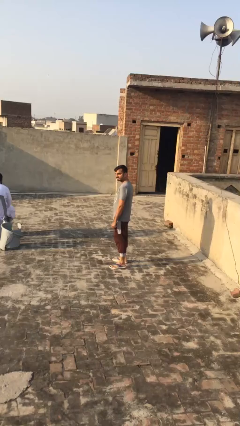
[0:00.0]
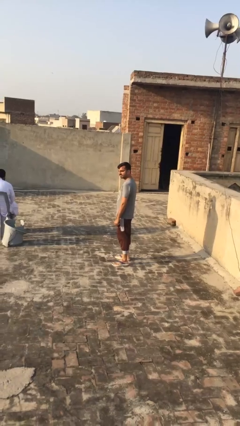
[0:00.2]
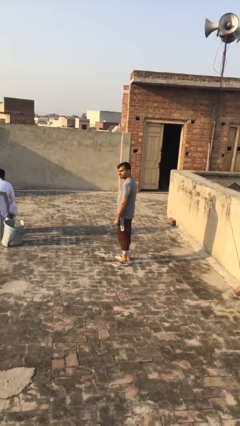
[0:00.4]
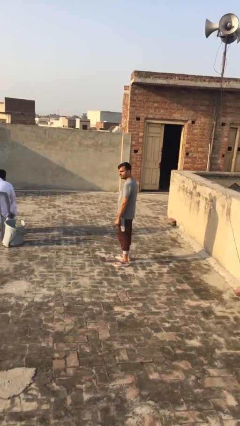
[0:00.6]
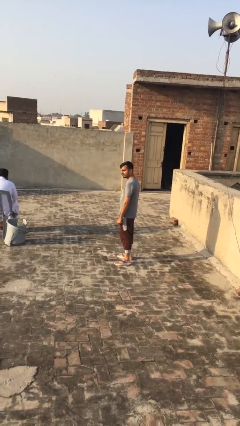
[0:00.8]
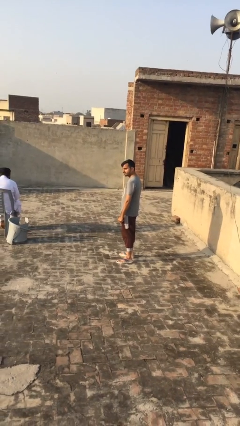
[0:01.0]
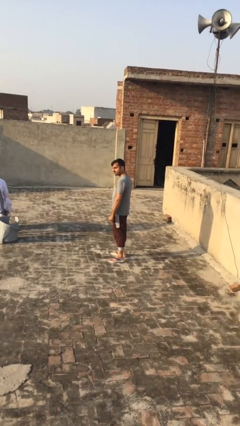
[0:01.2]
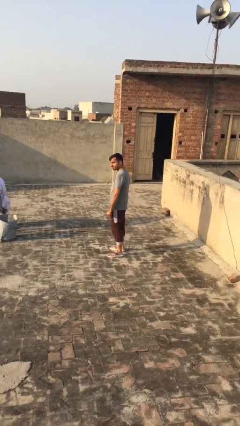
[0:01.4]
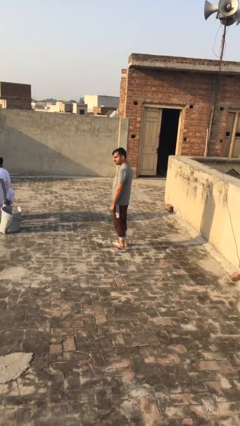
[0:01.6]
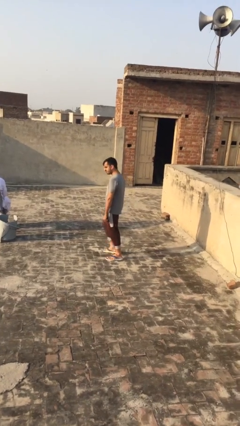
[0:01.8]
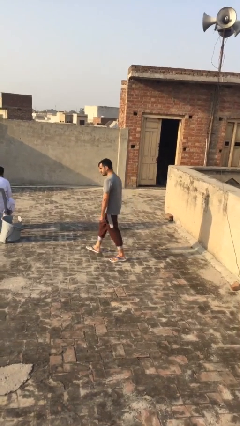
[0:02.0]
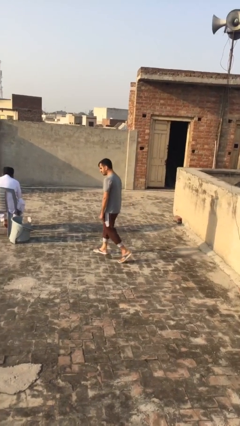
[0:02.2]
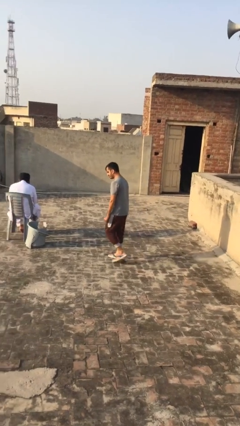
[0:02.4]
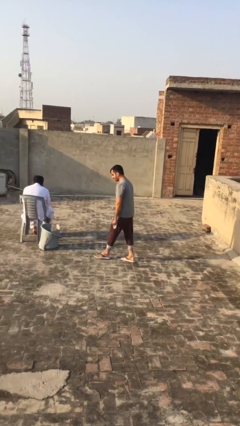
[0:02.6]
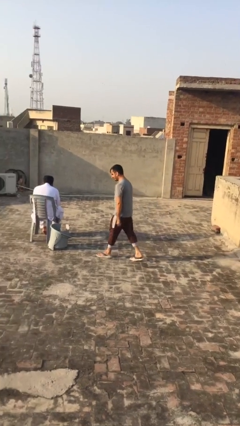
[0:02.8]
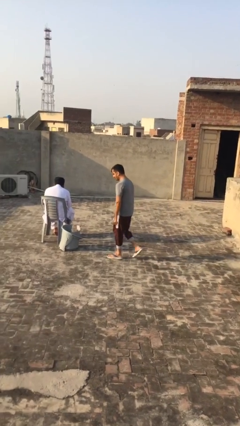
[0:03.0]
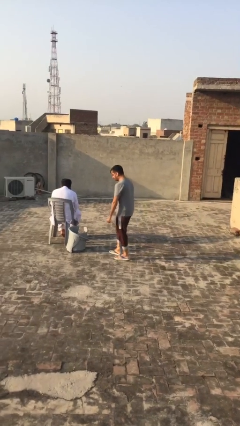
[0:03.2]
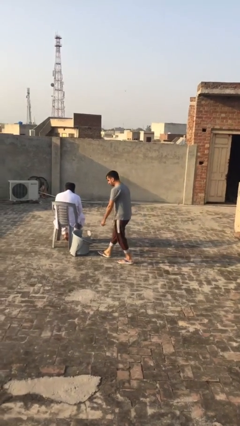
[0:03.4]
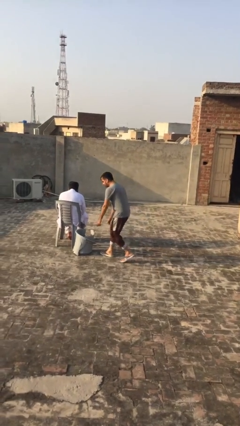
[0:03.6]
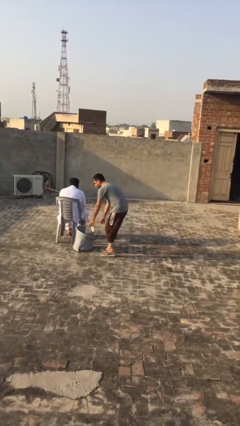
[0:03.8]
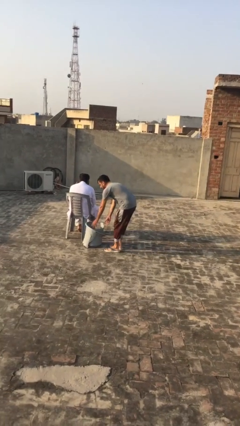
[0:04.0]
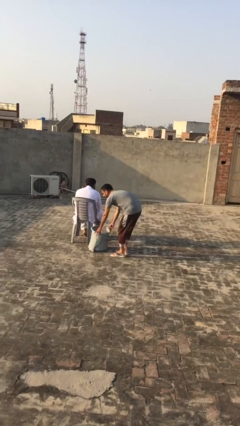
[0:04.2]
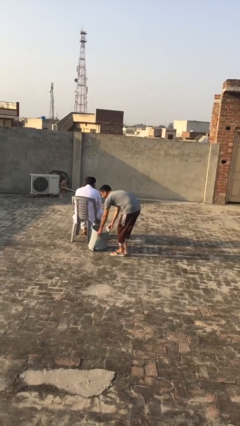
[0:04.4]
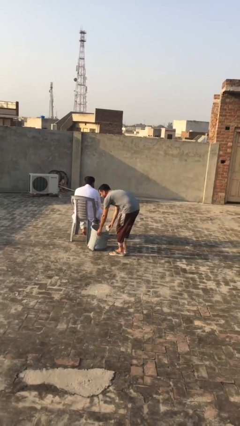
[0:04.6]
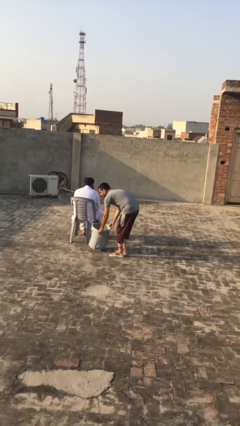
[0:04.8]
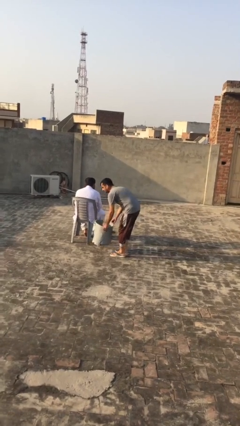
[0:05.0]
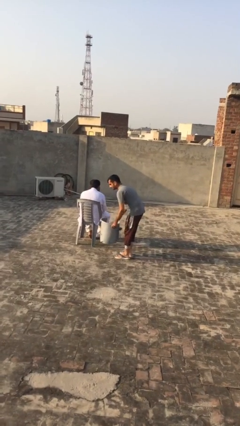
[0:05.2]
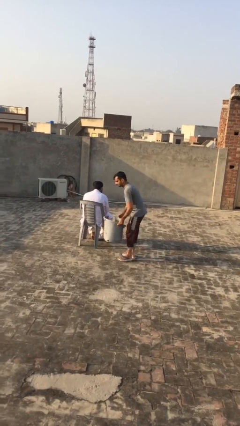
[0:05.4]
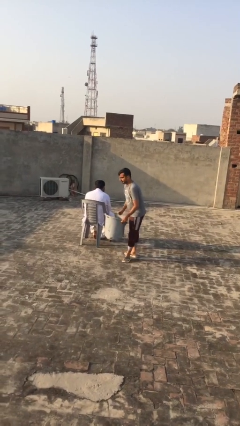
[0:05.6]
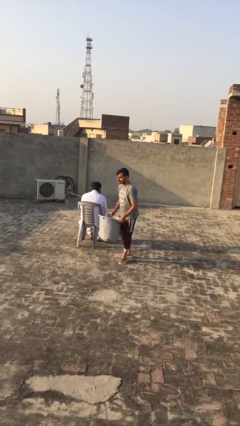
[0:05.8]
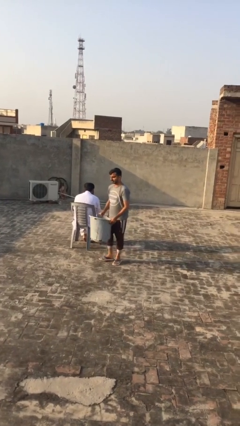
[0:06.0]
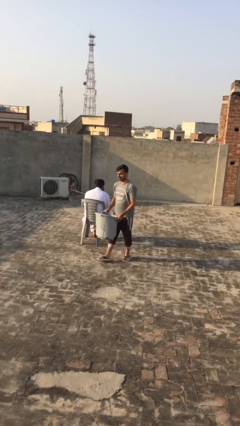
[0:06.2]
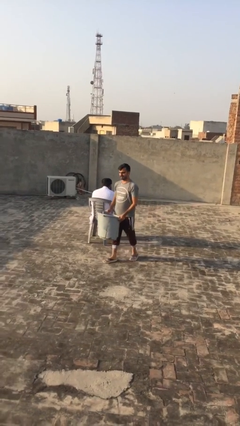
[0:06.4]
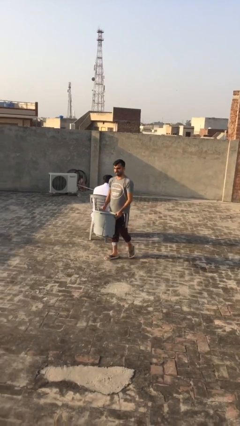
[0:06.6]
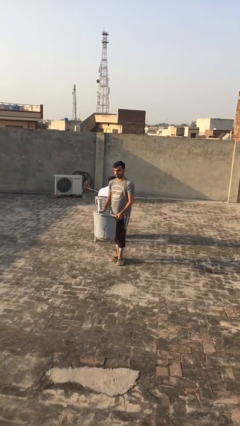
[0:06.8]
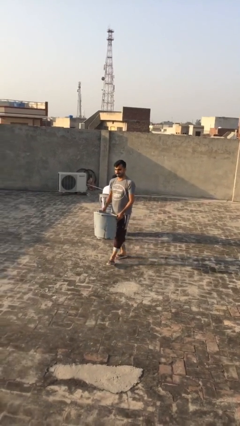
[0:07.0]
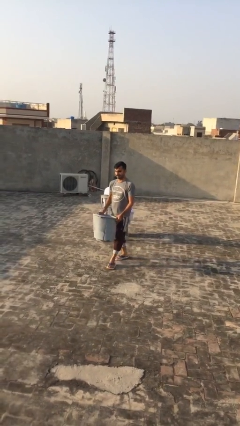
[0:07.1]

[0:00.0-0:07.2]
person steals object from person

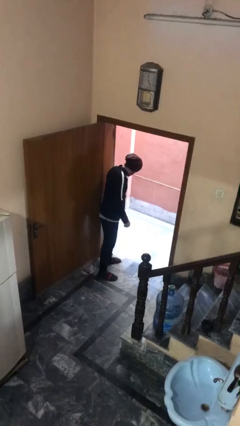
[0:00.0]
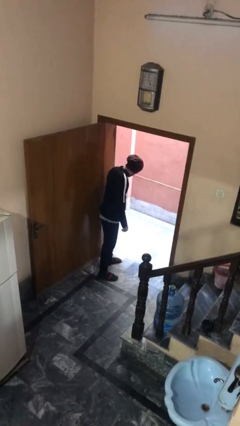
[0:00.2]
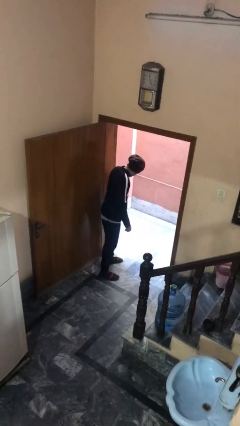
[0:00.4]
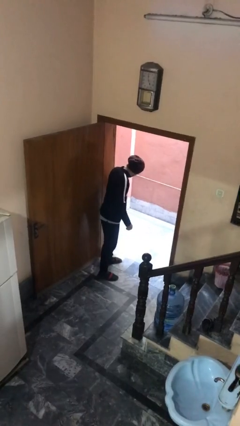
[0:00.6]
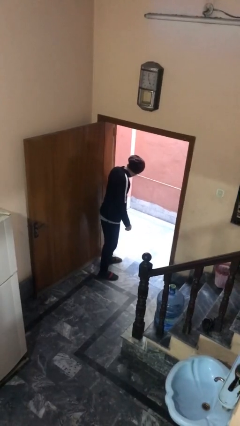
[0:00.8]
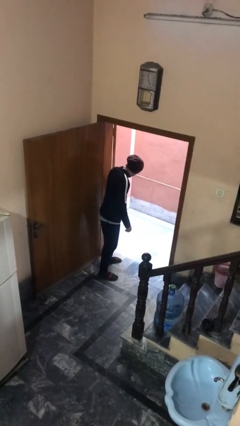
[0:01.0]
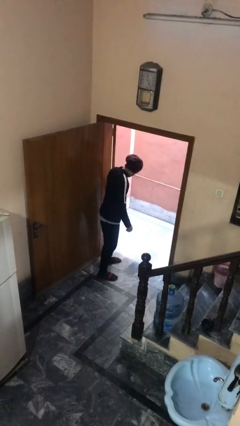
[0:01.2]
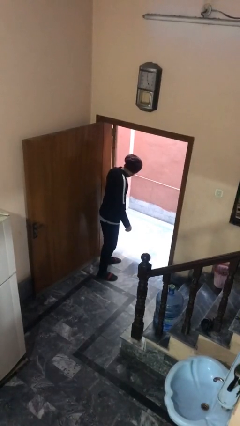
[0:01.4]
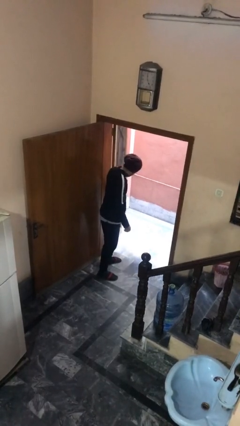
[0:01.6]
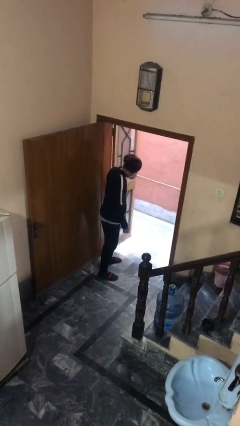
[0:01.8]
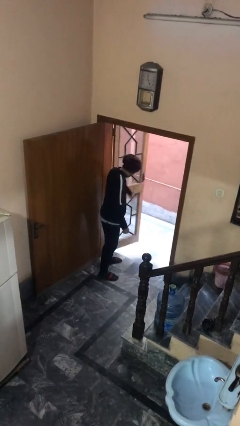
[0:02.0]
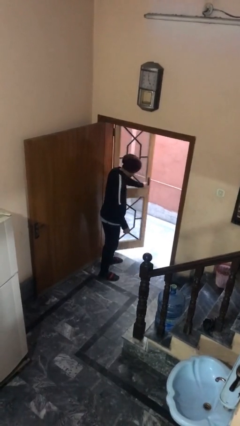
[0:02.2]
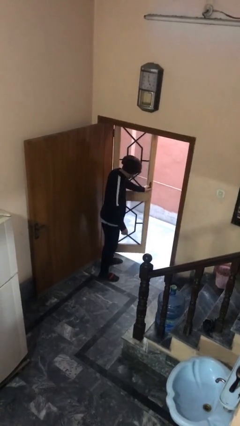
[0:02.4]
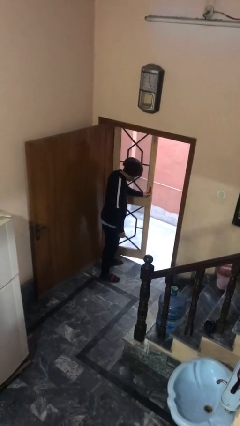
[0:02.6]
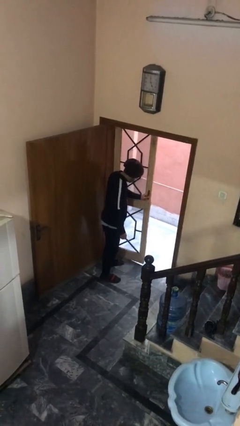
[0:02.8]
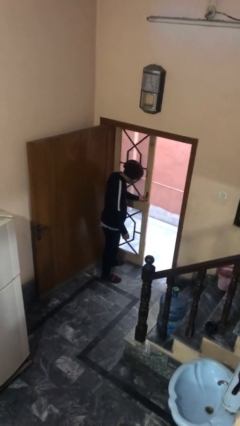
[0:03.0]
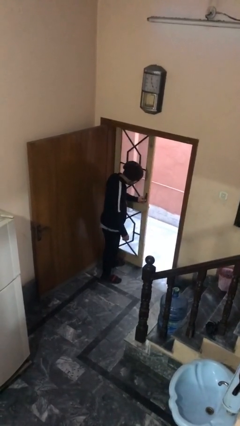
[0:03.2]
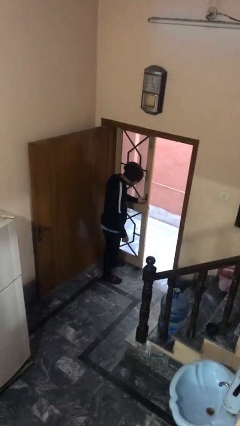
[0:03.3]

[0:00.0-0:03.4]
person closes facility door

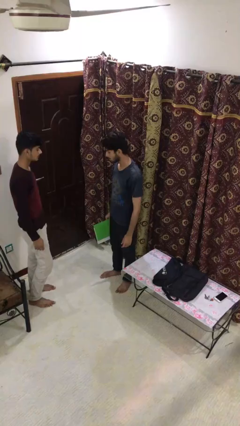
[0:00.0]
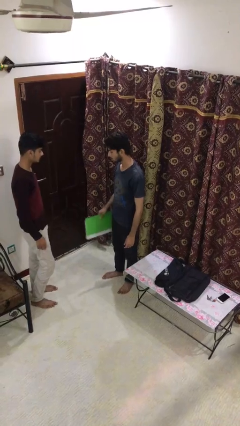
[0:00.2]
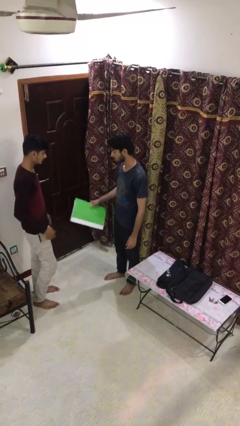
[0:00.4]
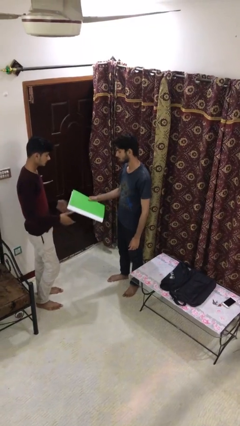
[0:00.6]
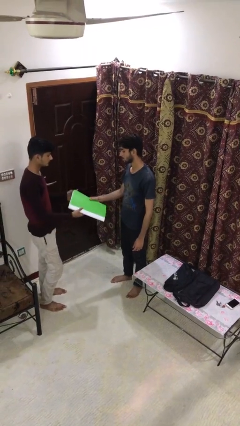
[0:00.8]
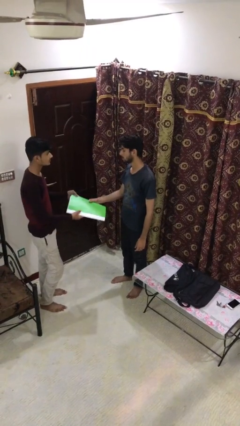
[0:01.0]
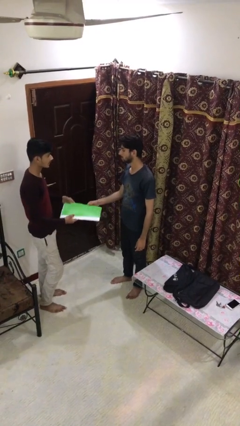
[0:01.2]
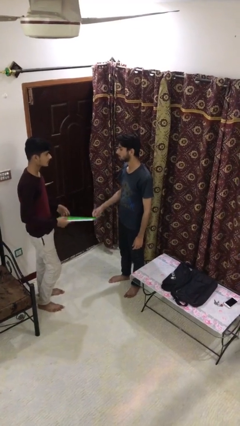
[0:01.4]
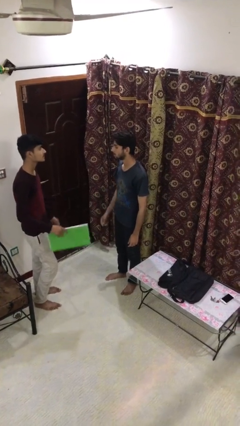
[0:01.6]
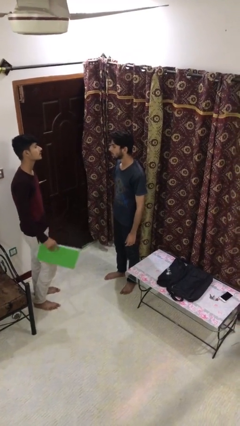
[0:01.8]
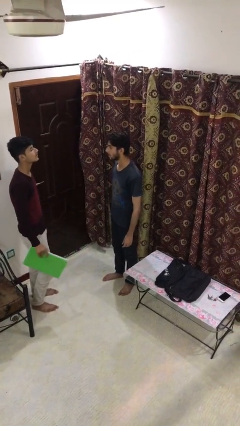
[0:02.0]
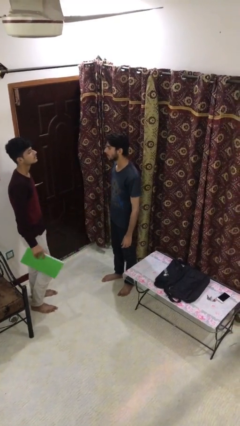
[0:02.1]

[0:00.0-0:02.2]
person transfers object to person

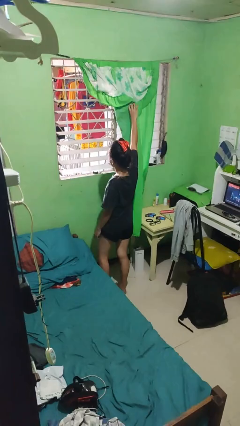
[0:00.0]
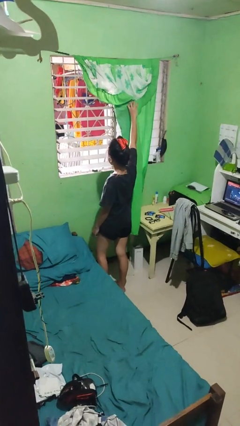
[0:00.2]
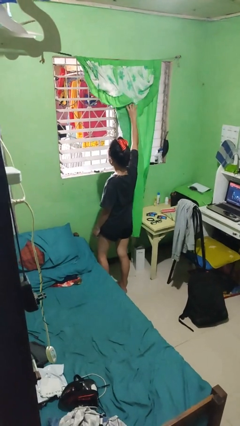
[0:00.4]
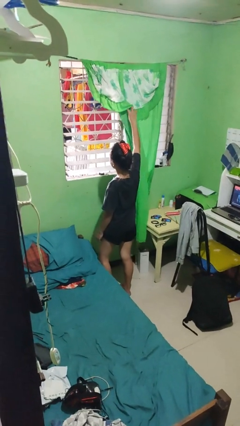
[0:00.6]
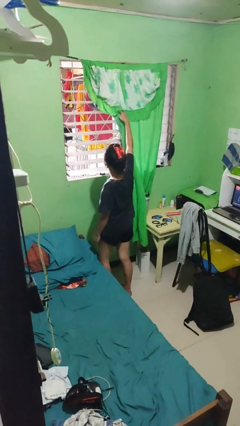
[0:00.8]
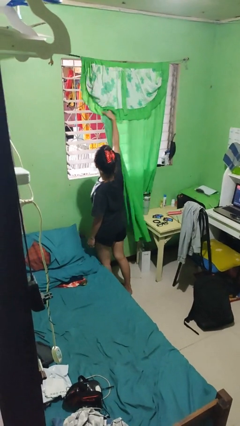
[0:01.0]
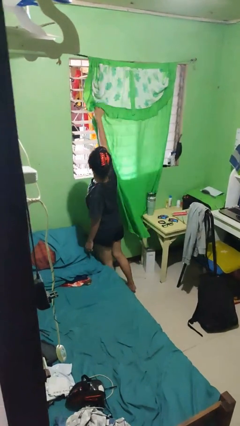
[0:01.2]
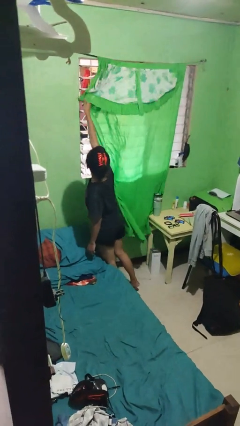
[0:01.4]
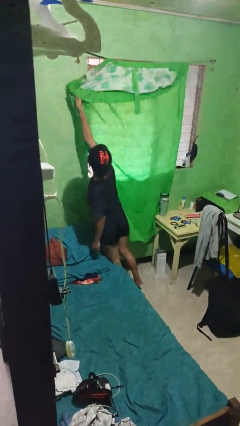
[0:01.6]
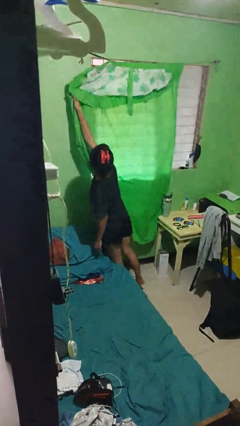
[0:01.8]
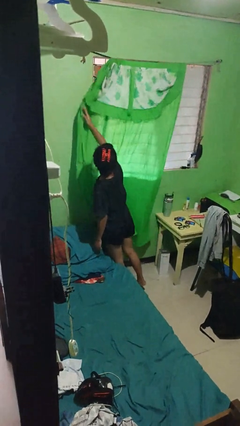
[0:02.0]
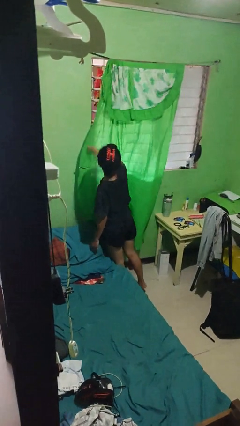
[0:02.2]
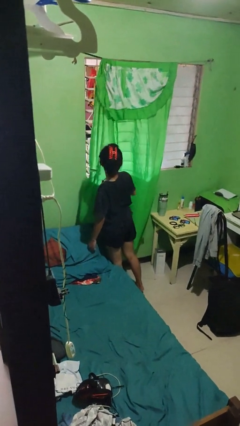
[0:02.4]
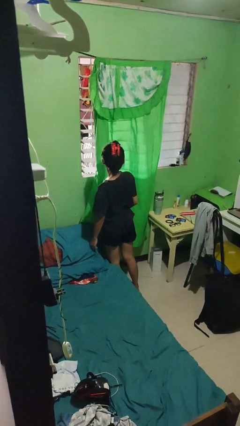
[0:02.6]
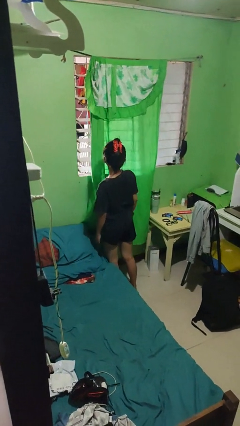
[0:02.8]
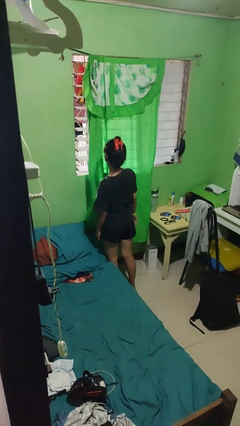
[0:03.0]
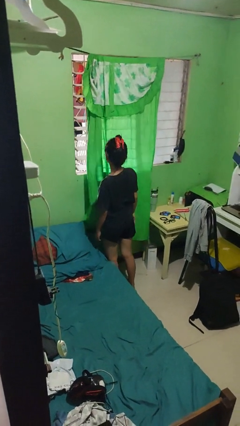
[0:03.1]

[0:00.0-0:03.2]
person closes curtains

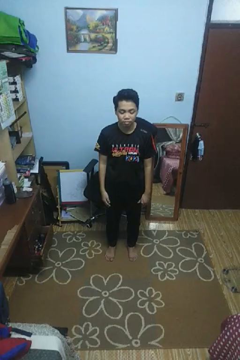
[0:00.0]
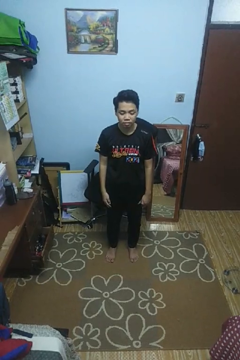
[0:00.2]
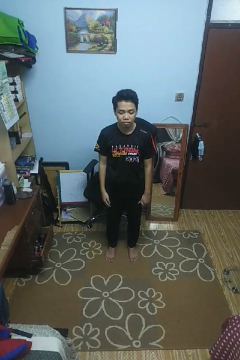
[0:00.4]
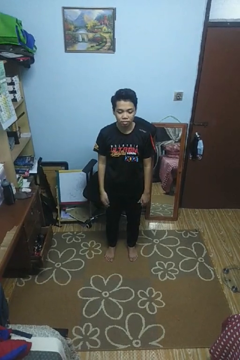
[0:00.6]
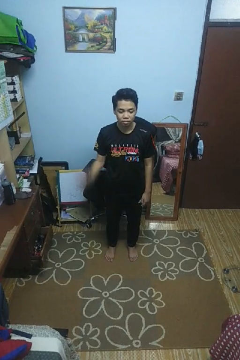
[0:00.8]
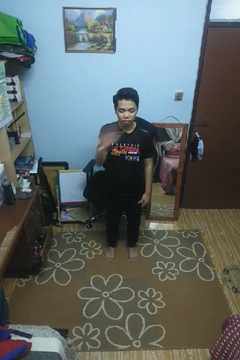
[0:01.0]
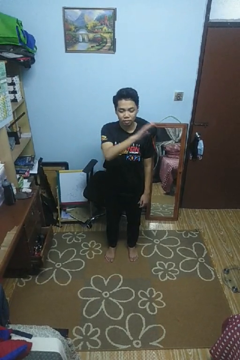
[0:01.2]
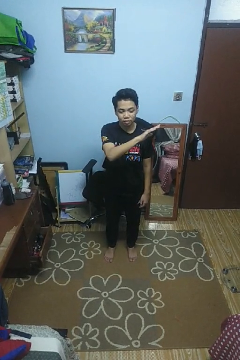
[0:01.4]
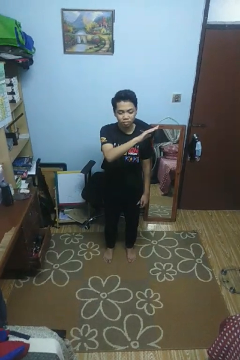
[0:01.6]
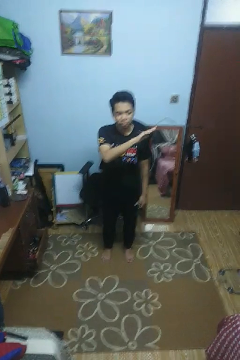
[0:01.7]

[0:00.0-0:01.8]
person gestures swipe left
